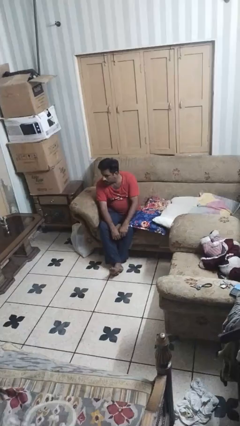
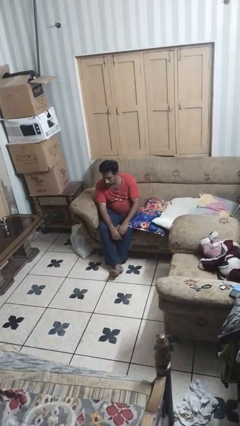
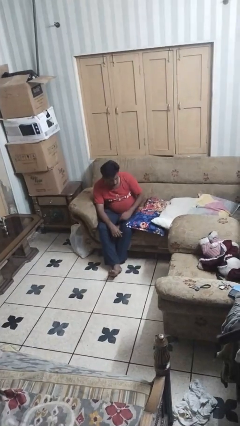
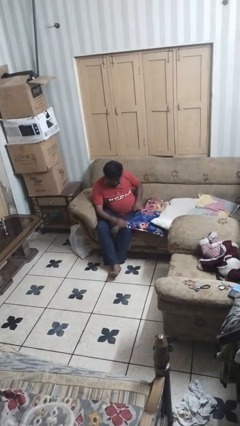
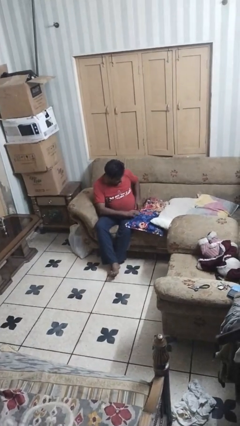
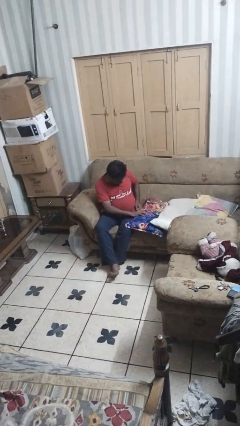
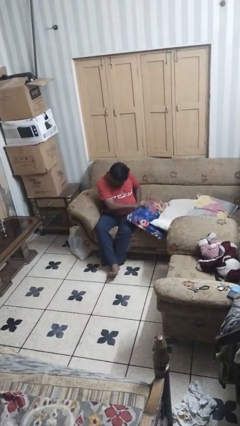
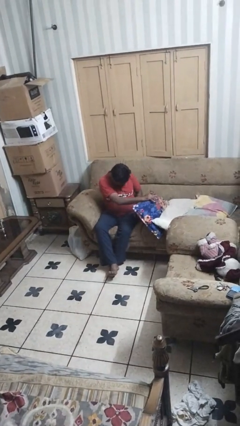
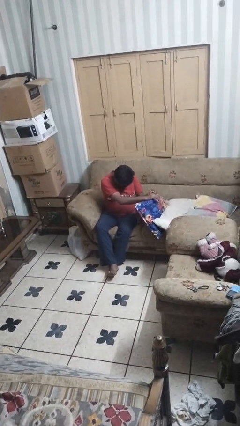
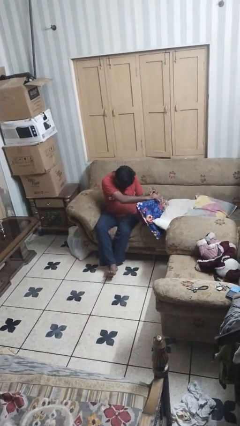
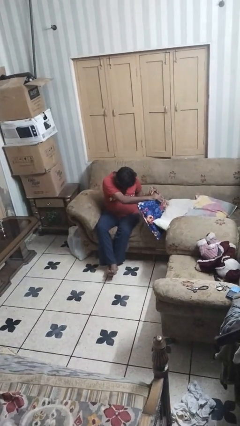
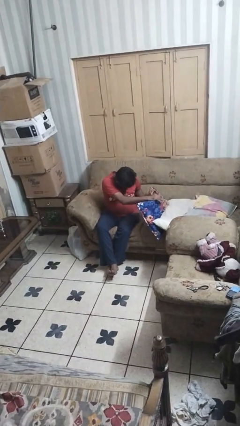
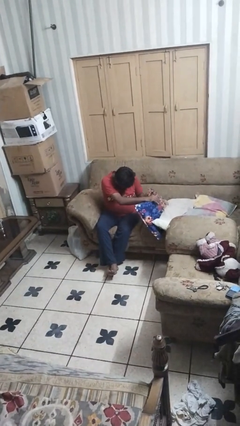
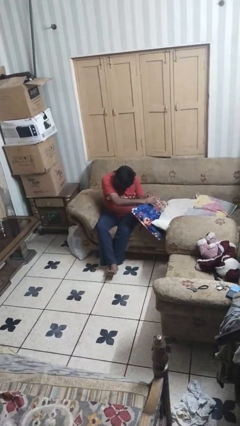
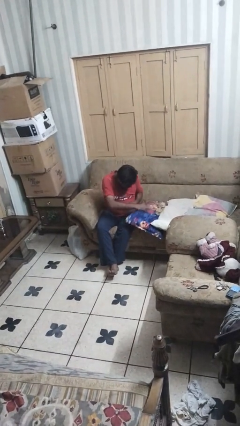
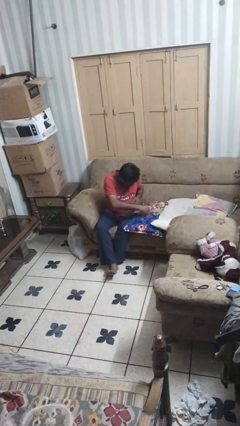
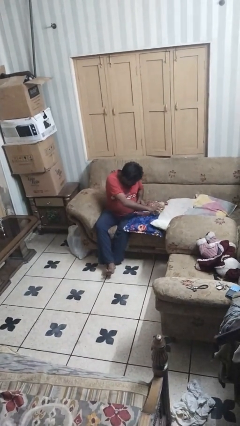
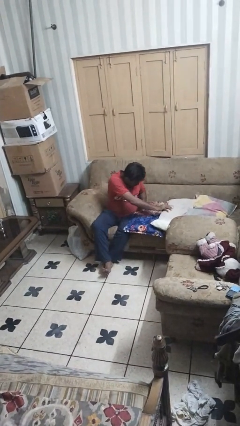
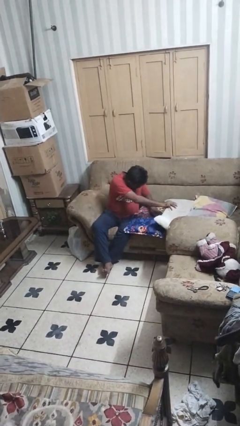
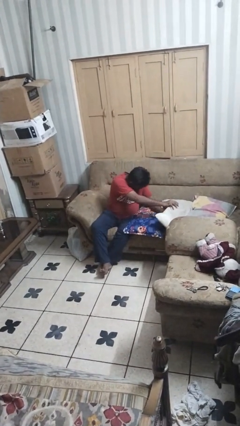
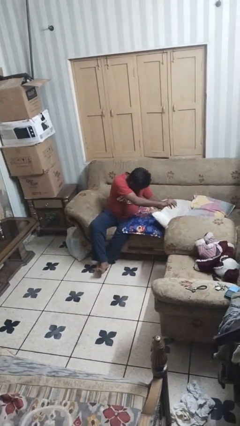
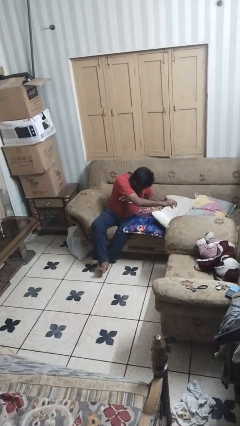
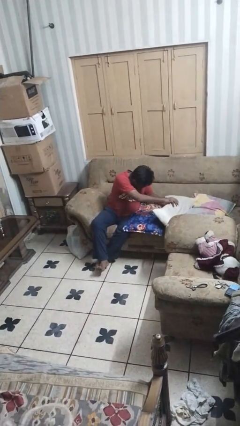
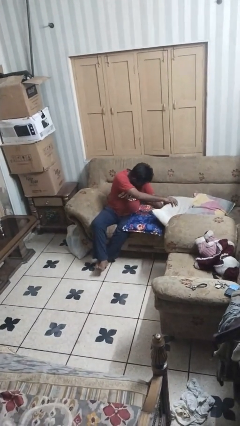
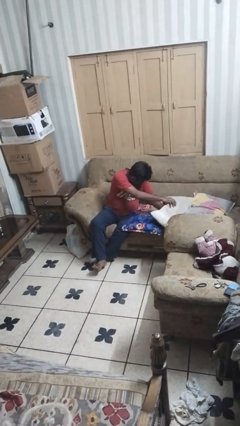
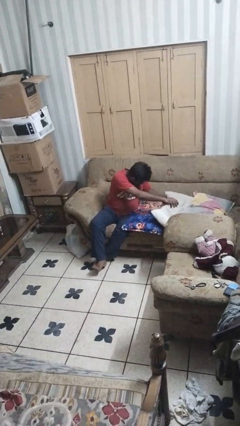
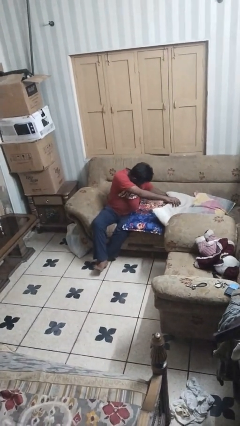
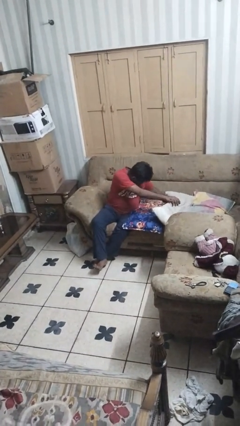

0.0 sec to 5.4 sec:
person searches in couch

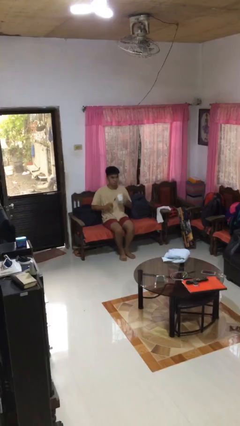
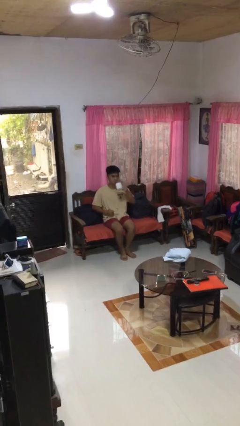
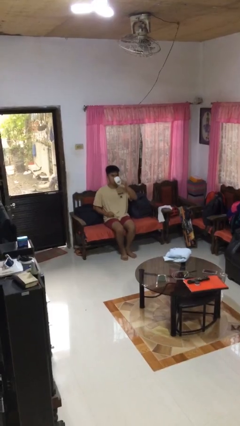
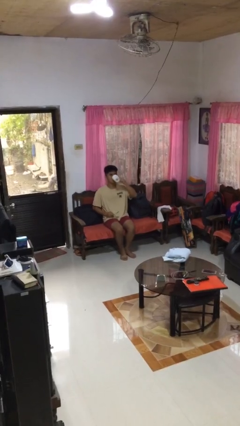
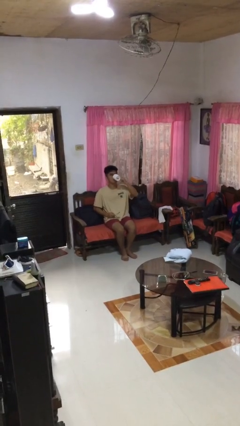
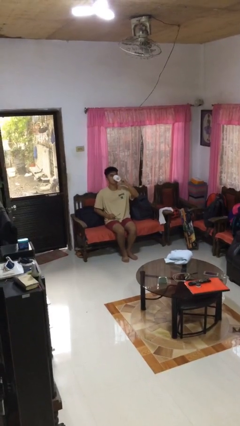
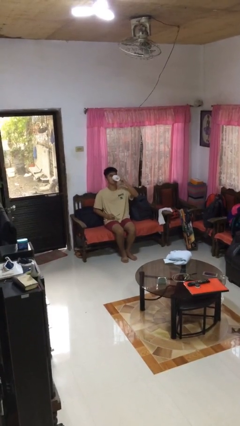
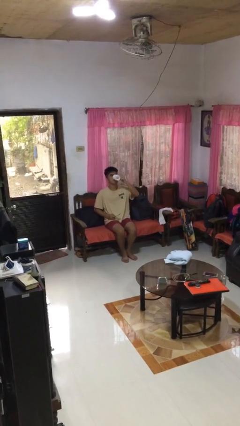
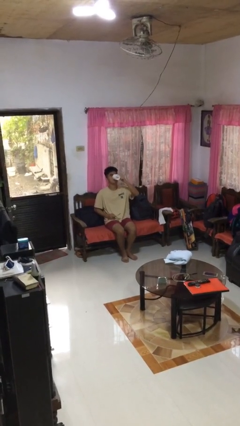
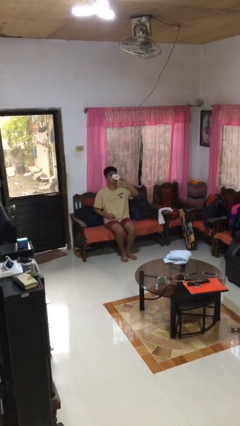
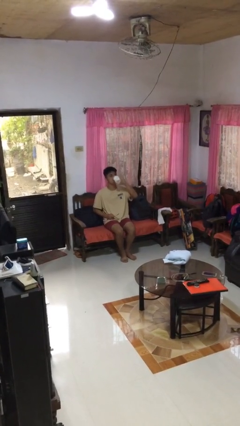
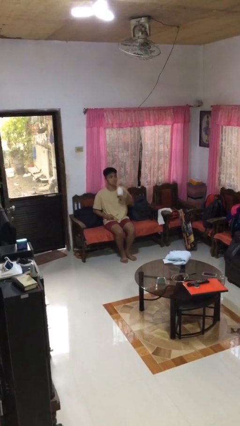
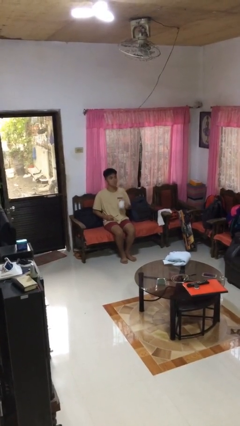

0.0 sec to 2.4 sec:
person drinks from mug

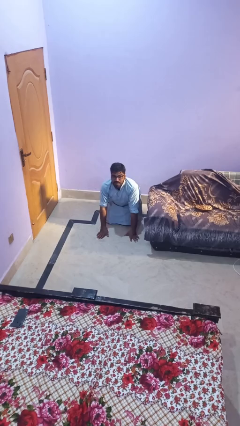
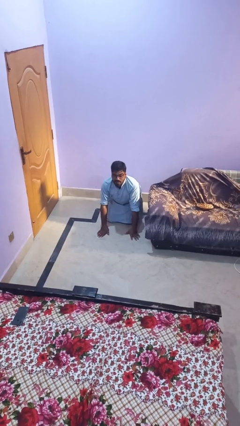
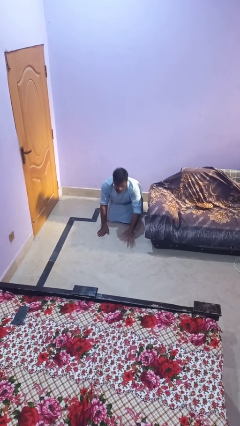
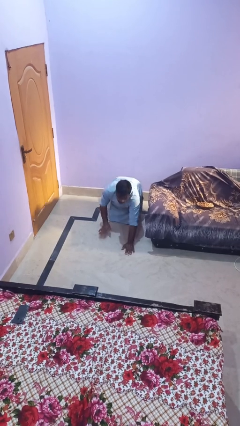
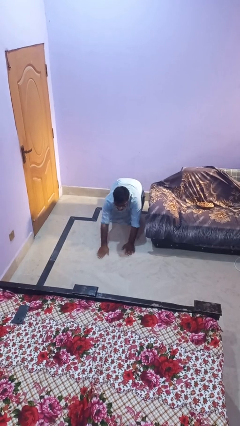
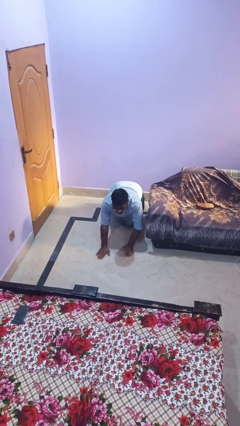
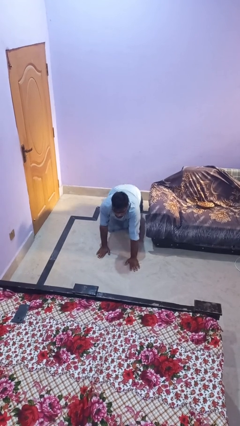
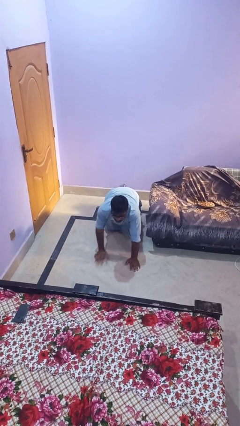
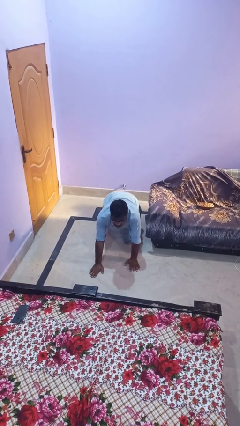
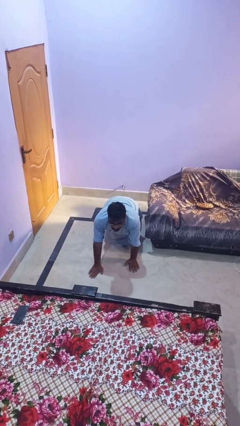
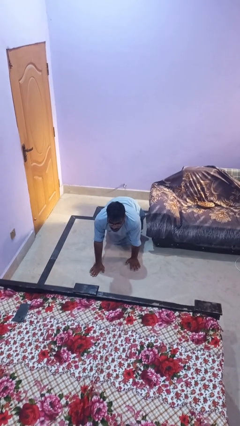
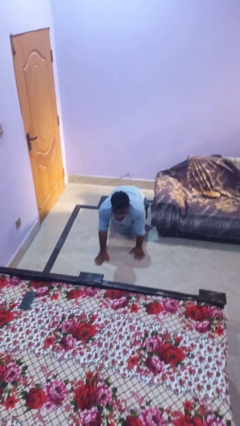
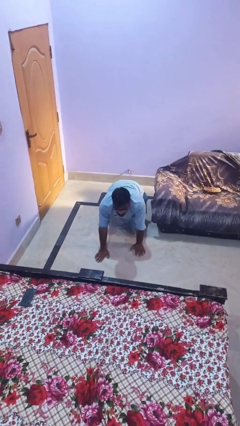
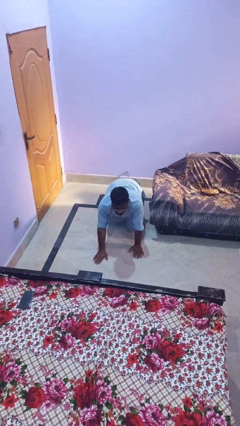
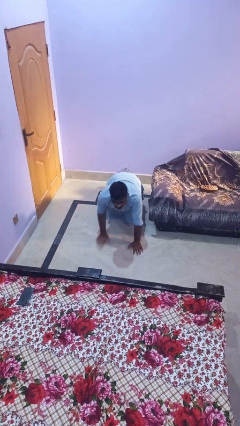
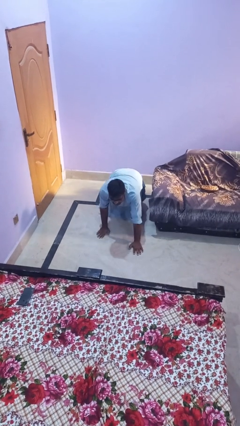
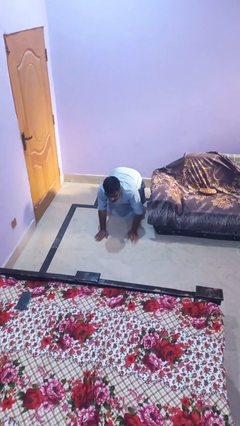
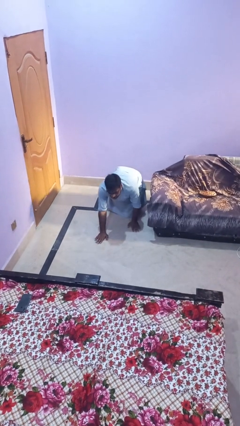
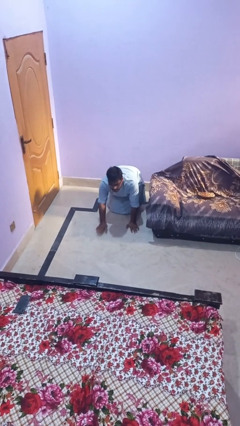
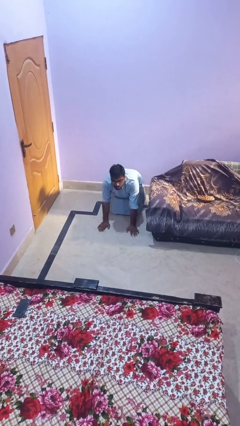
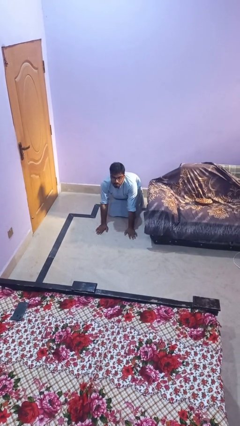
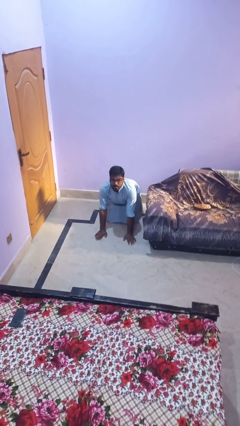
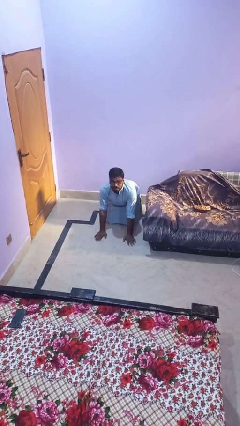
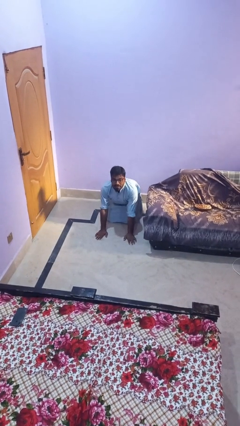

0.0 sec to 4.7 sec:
person crawls

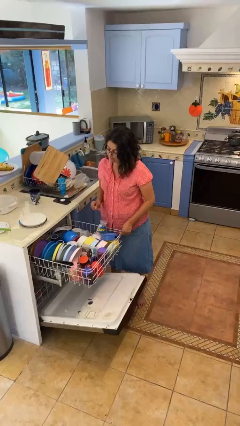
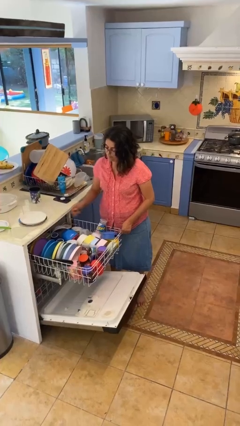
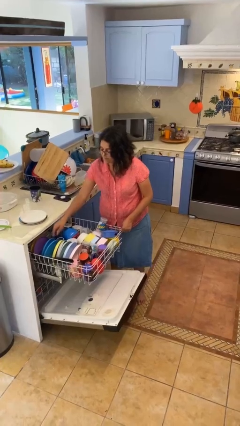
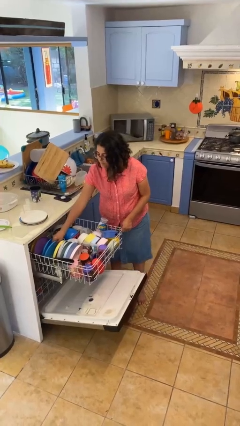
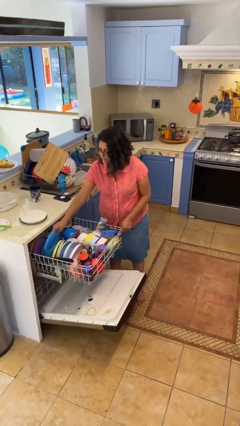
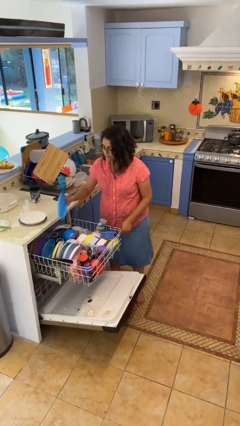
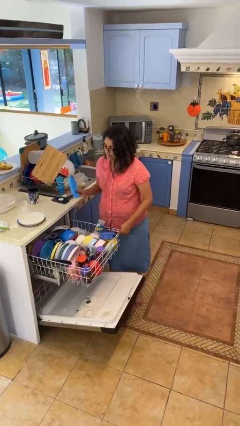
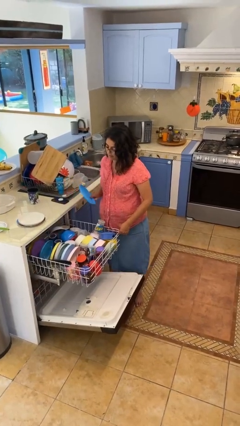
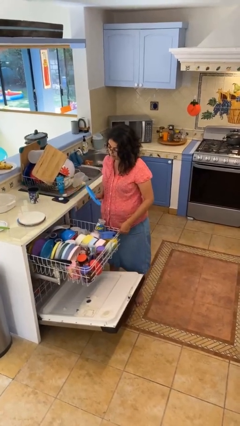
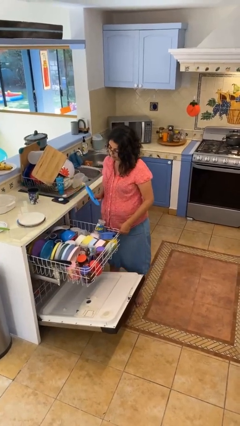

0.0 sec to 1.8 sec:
person unloads dishwasher

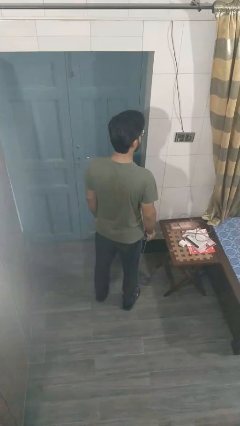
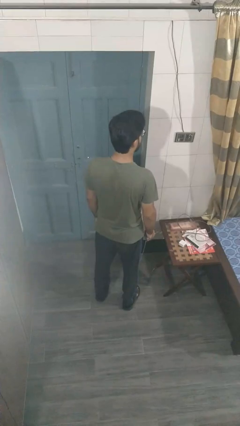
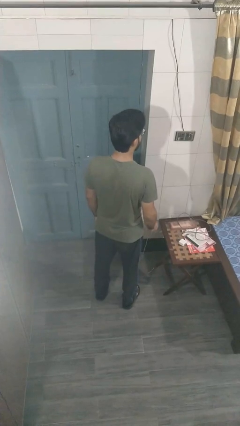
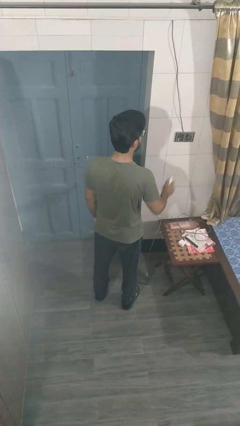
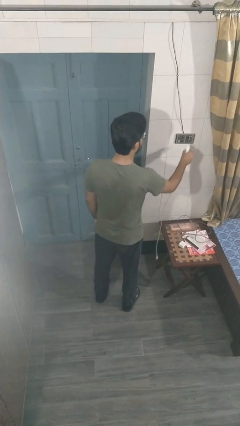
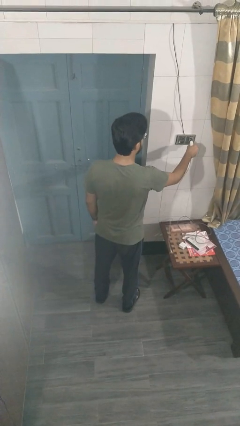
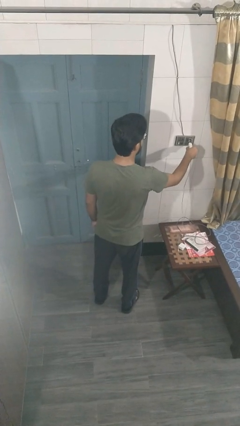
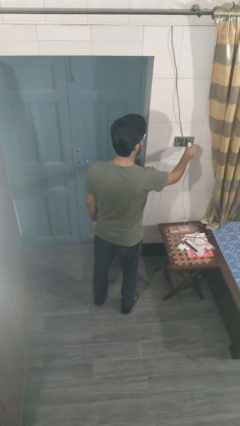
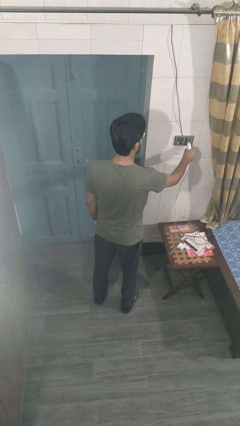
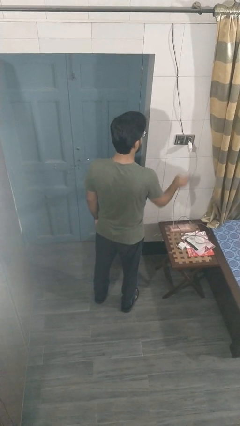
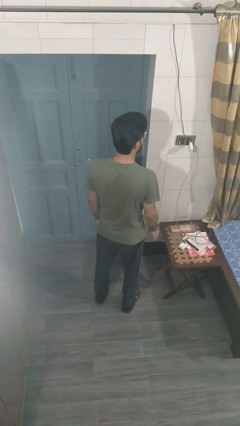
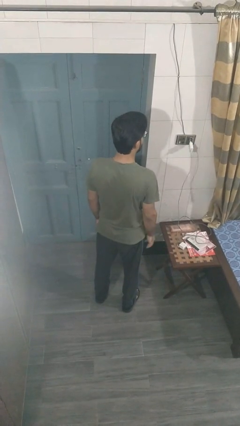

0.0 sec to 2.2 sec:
person plugs into electrical socket

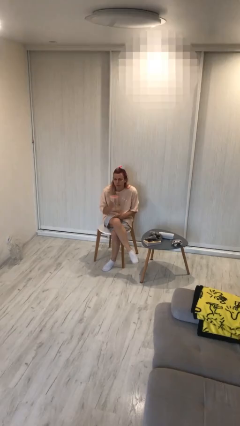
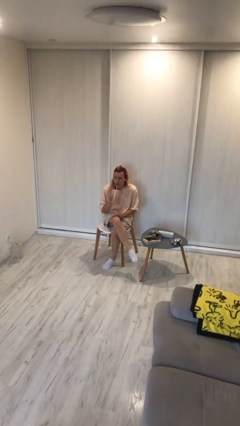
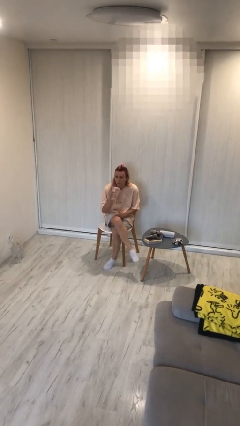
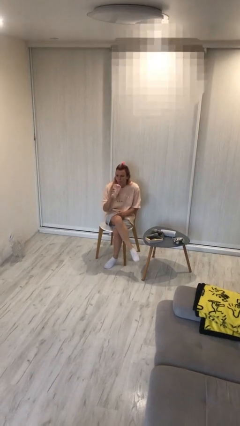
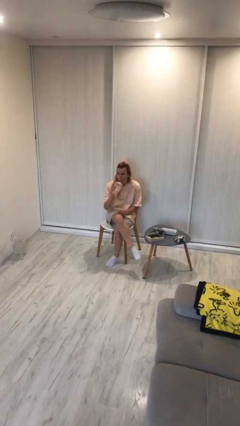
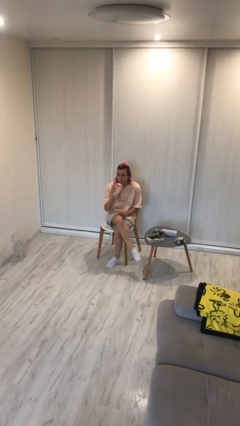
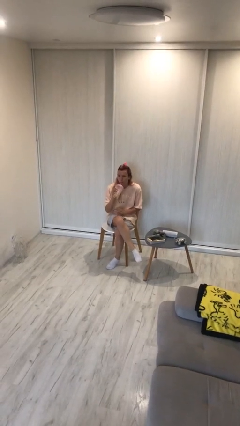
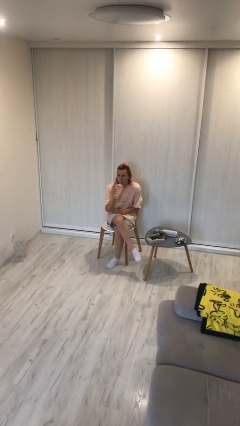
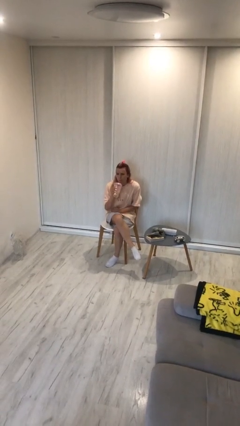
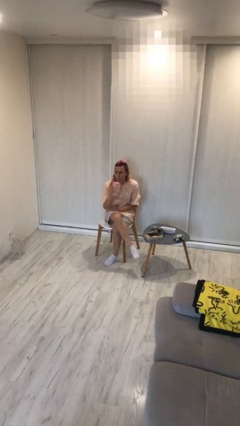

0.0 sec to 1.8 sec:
person drinks from straw
